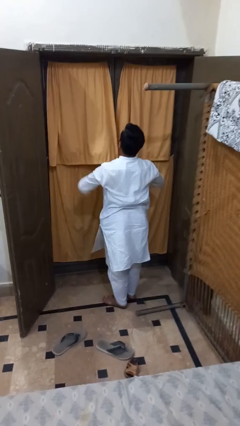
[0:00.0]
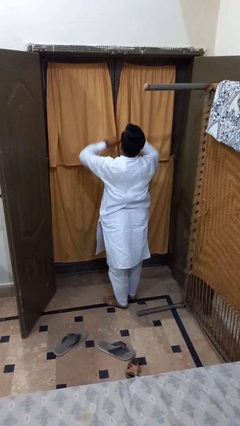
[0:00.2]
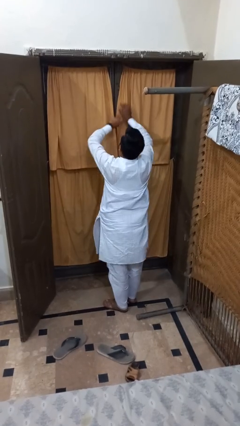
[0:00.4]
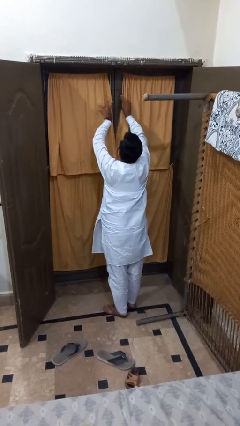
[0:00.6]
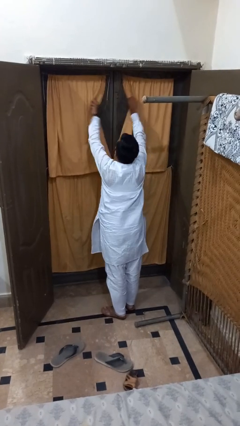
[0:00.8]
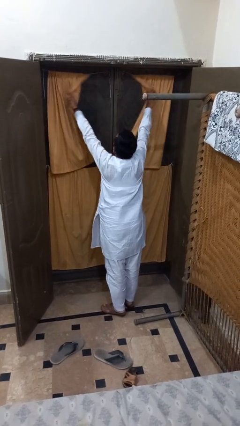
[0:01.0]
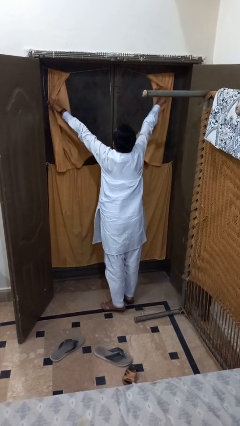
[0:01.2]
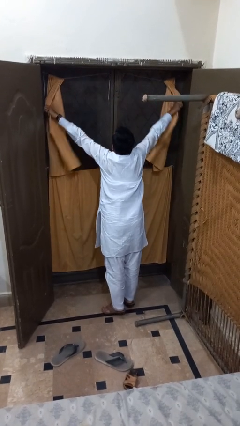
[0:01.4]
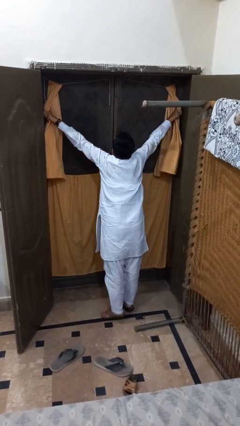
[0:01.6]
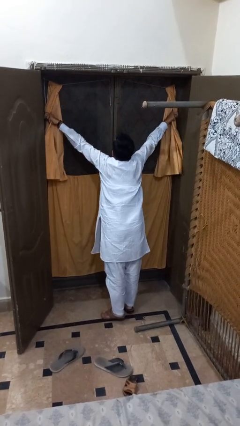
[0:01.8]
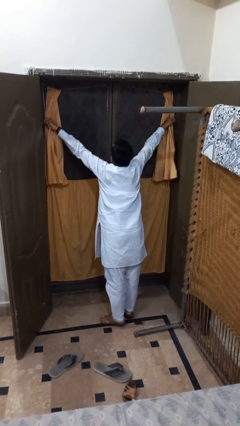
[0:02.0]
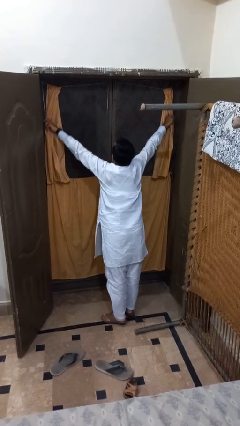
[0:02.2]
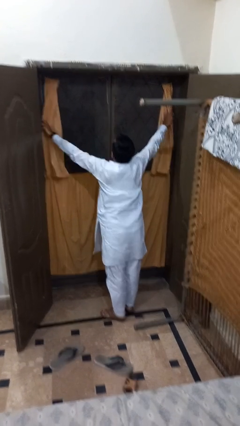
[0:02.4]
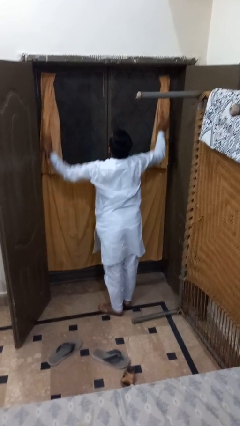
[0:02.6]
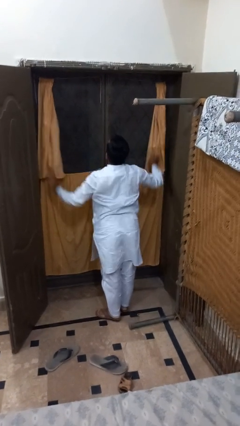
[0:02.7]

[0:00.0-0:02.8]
person opens curtains

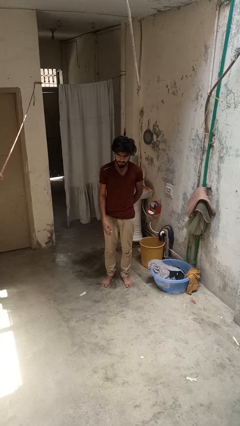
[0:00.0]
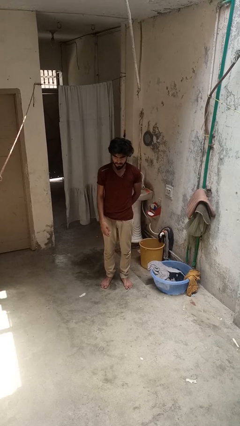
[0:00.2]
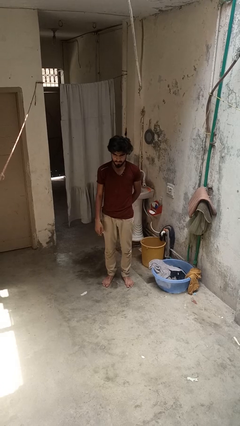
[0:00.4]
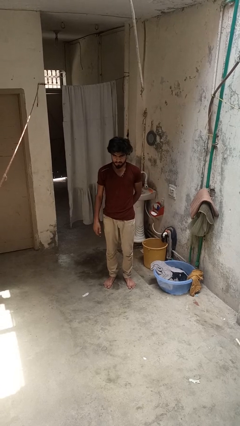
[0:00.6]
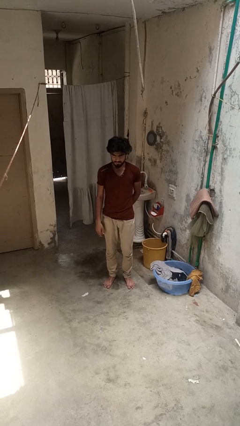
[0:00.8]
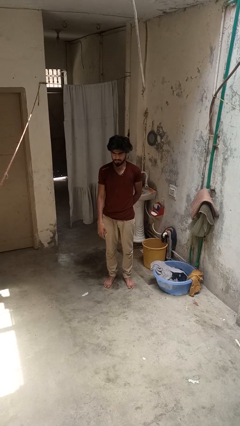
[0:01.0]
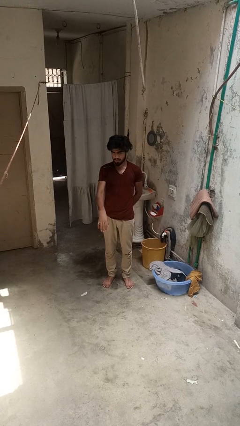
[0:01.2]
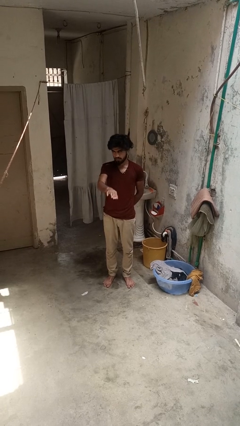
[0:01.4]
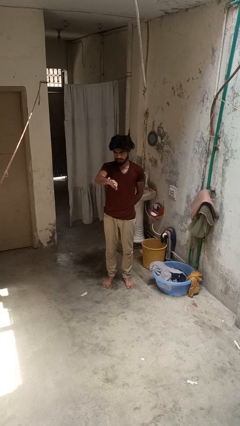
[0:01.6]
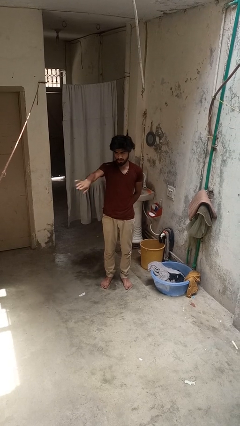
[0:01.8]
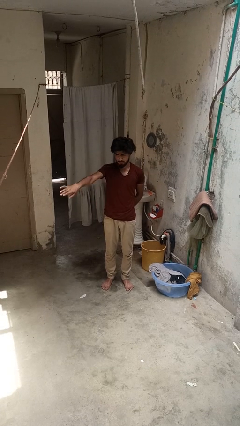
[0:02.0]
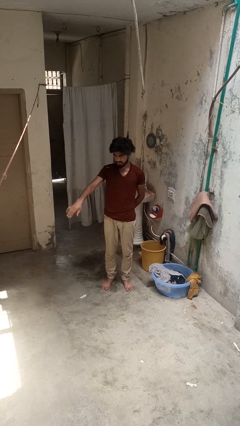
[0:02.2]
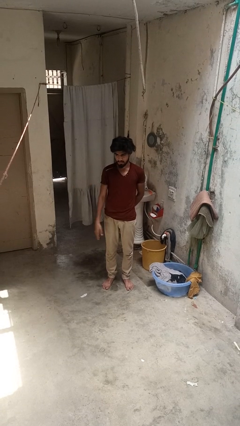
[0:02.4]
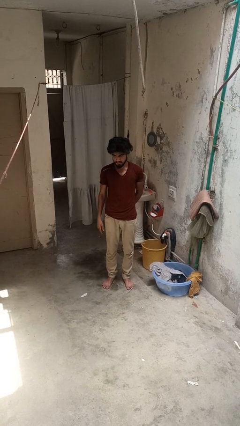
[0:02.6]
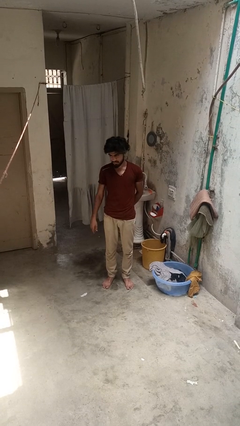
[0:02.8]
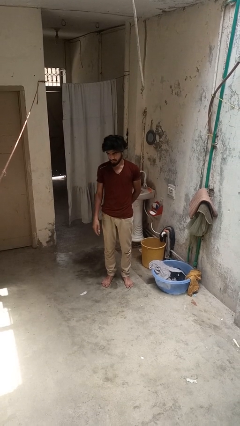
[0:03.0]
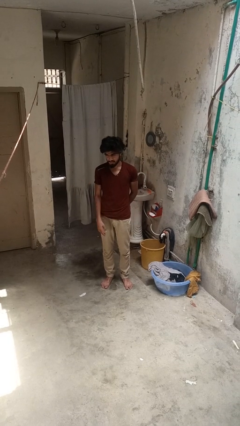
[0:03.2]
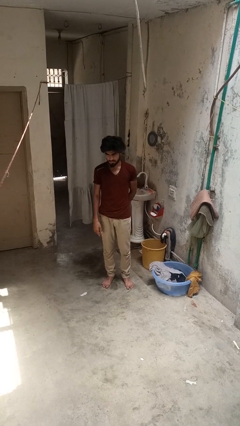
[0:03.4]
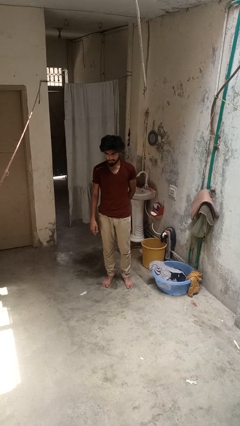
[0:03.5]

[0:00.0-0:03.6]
person gestures swipe right

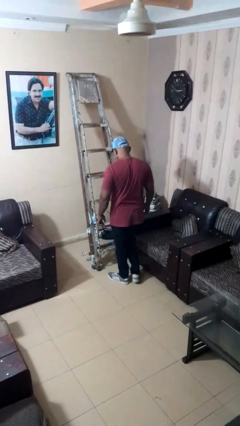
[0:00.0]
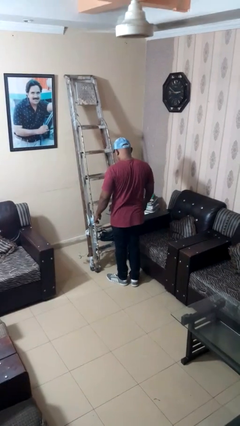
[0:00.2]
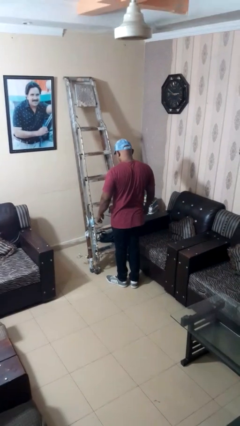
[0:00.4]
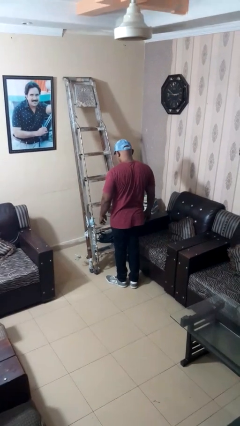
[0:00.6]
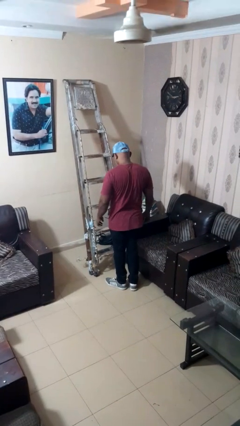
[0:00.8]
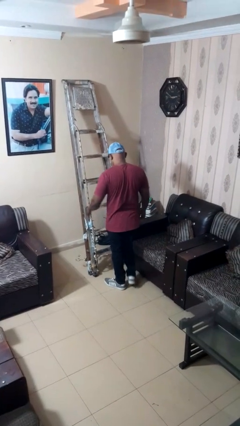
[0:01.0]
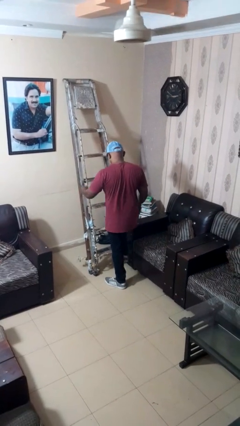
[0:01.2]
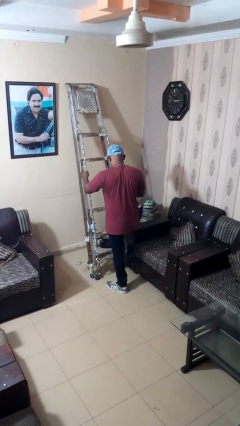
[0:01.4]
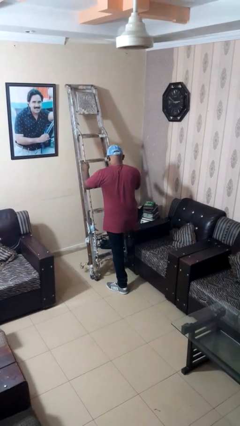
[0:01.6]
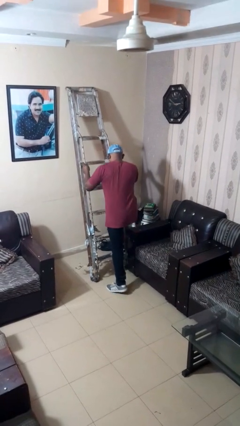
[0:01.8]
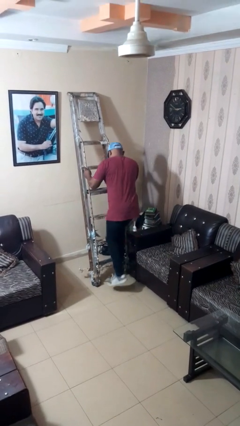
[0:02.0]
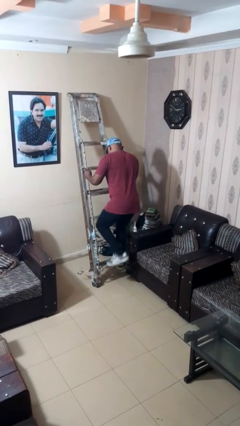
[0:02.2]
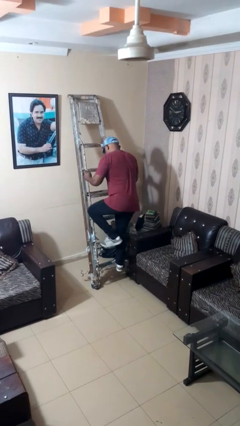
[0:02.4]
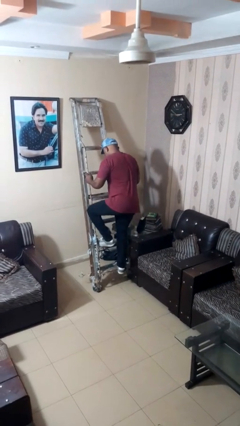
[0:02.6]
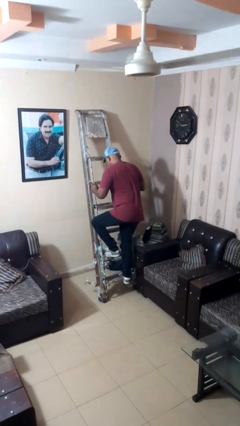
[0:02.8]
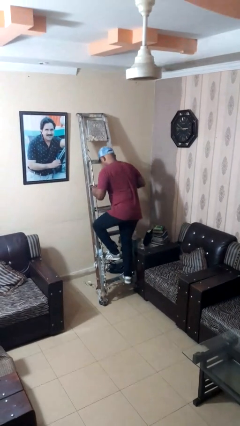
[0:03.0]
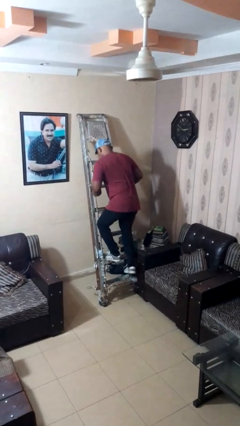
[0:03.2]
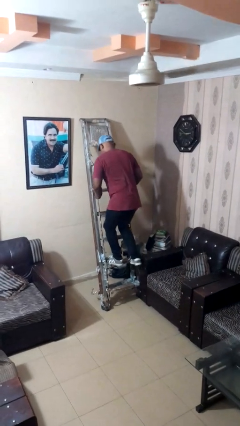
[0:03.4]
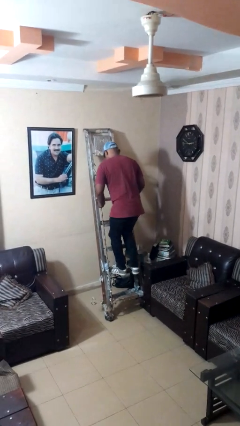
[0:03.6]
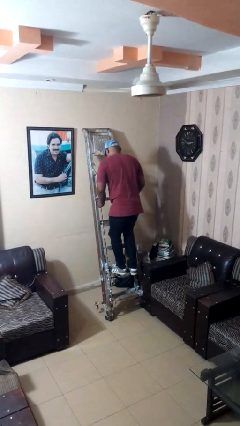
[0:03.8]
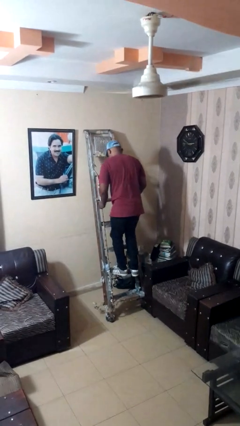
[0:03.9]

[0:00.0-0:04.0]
person climbs up ladder

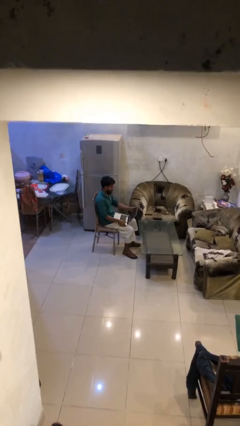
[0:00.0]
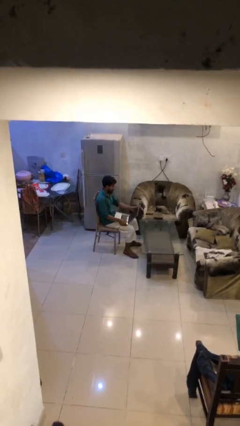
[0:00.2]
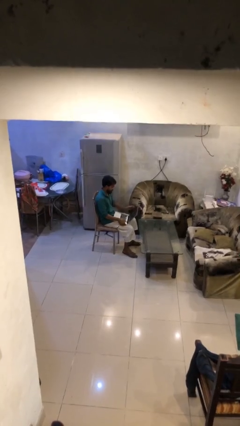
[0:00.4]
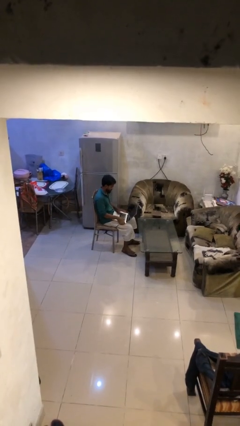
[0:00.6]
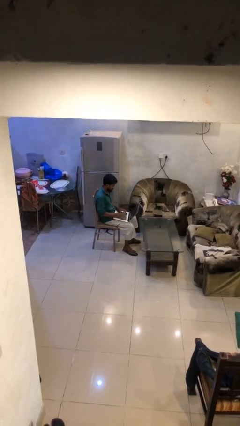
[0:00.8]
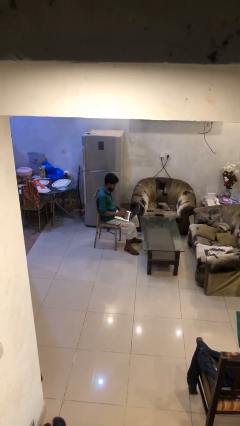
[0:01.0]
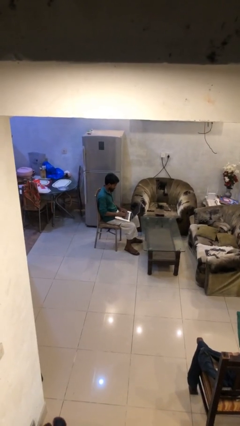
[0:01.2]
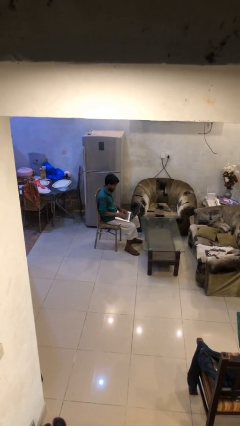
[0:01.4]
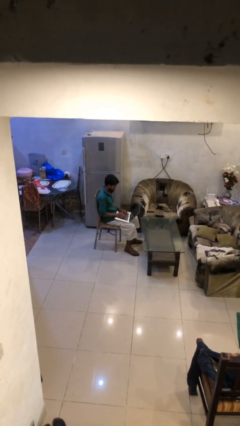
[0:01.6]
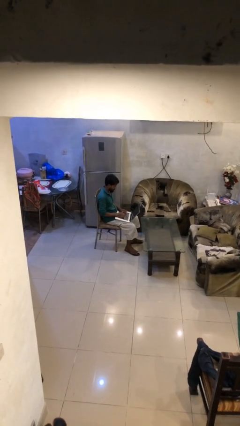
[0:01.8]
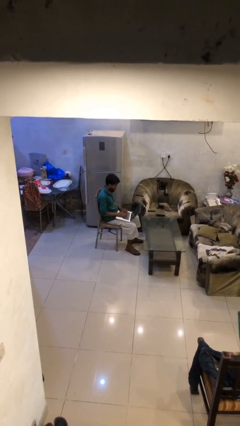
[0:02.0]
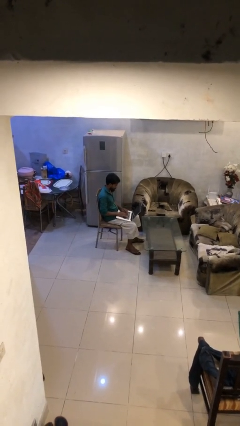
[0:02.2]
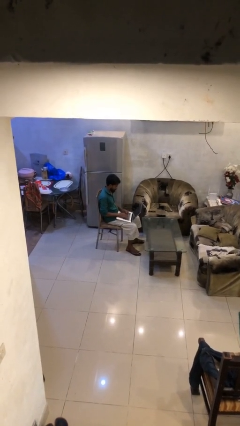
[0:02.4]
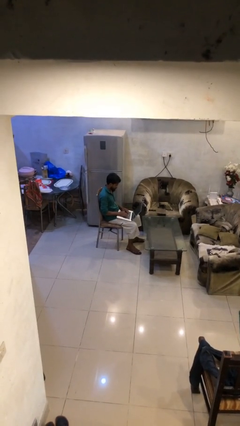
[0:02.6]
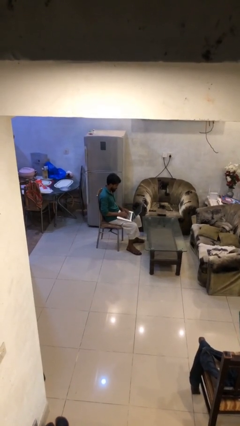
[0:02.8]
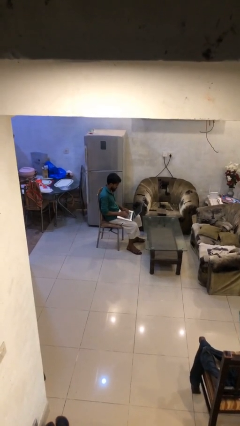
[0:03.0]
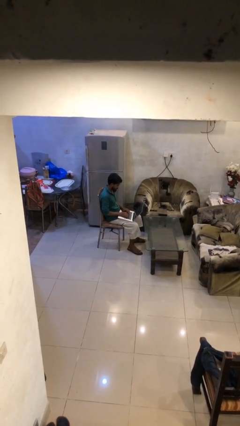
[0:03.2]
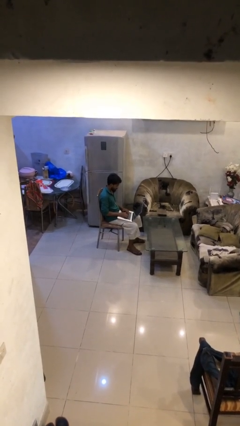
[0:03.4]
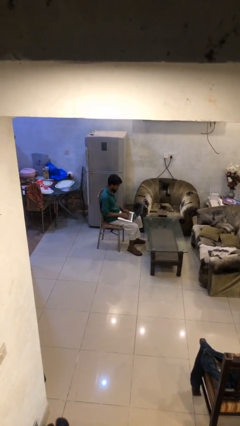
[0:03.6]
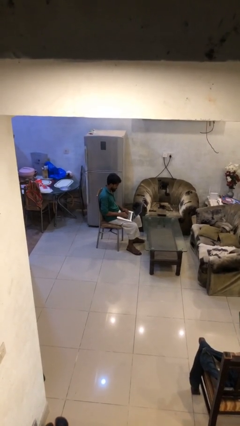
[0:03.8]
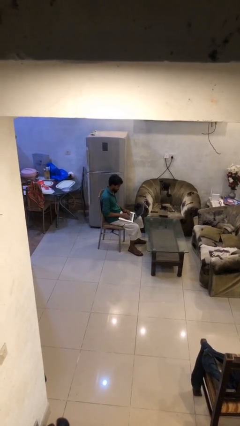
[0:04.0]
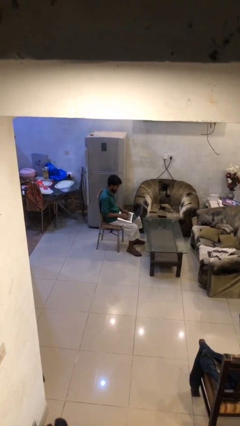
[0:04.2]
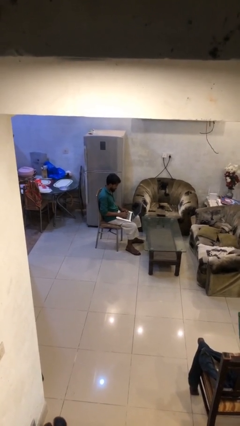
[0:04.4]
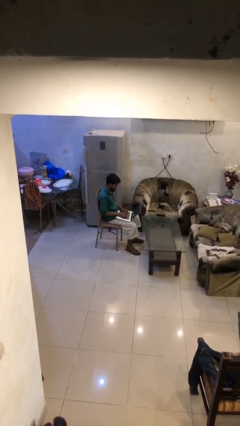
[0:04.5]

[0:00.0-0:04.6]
person interacts with laptop

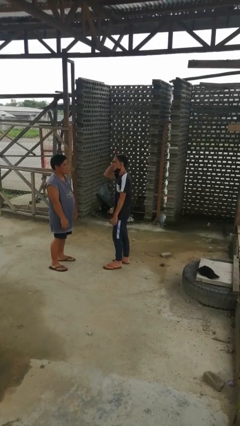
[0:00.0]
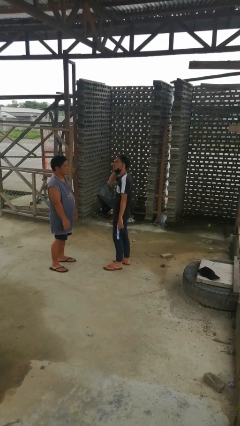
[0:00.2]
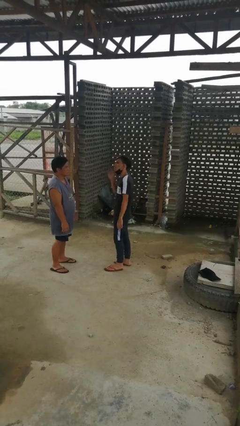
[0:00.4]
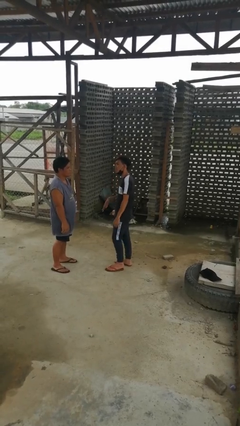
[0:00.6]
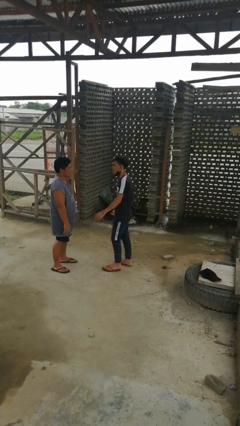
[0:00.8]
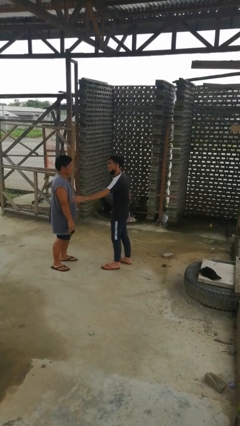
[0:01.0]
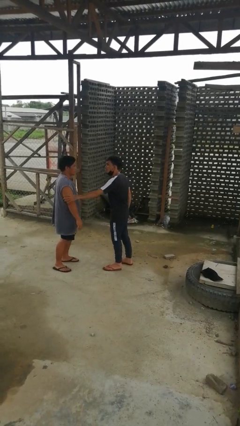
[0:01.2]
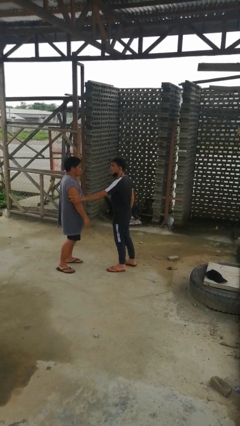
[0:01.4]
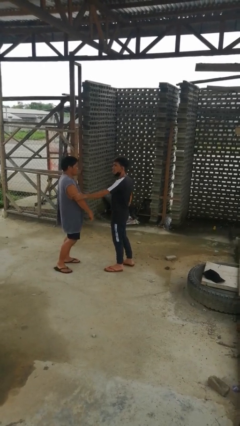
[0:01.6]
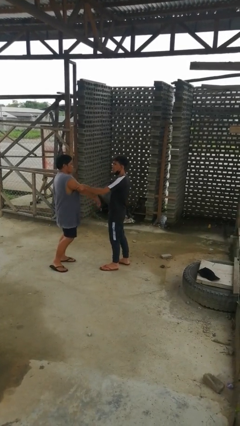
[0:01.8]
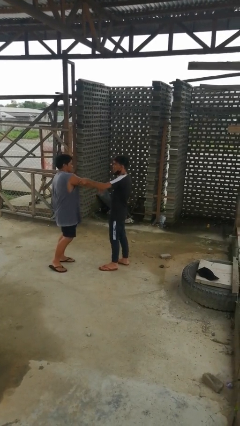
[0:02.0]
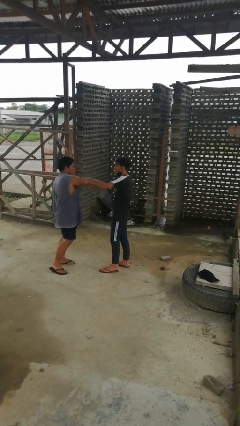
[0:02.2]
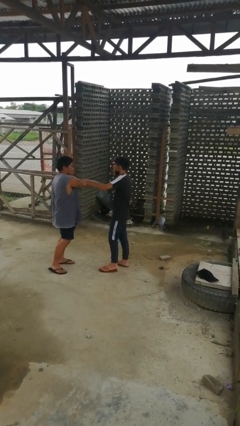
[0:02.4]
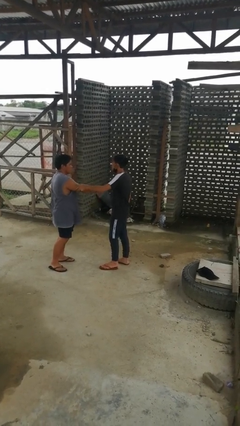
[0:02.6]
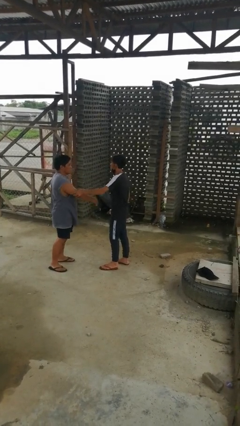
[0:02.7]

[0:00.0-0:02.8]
person grabs person by bicep
